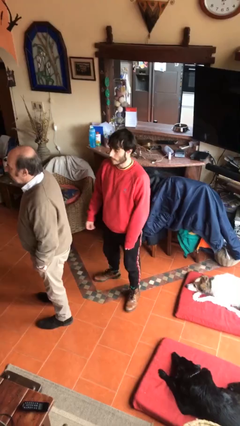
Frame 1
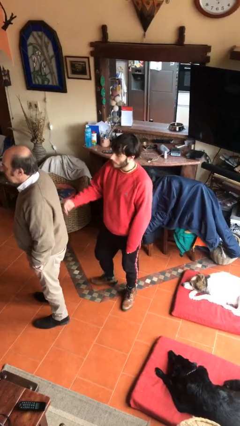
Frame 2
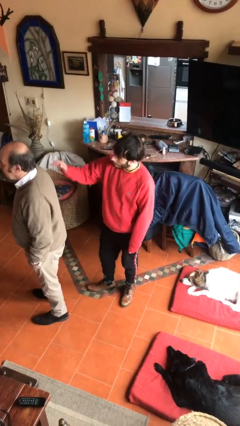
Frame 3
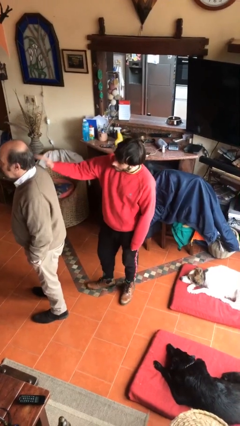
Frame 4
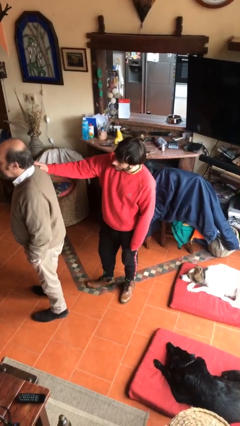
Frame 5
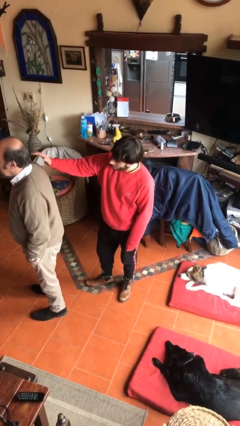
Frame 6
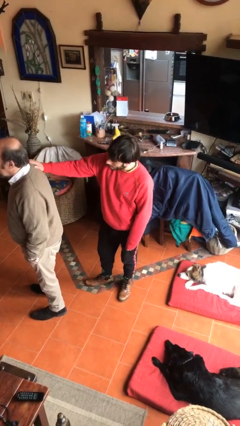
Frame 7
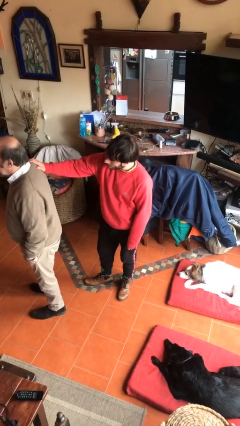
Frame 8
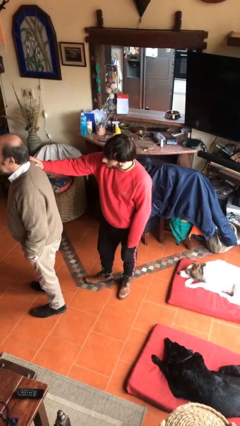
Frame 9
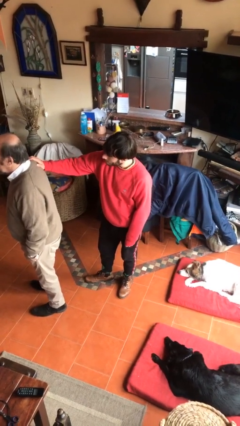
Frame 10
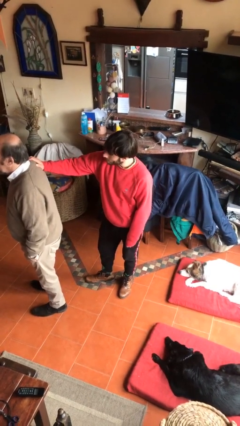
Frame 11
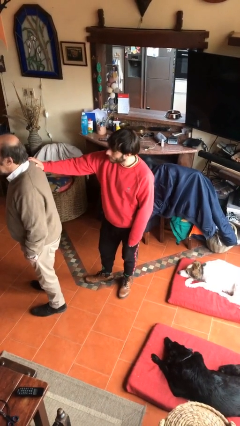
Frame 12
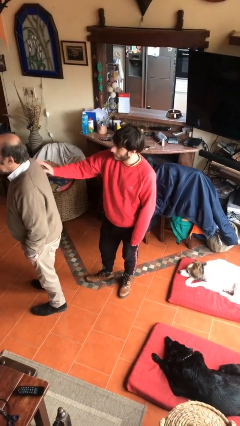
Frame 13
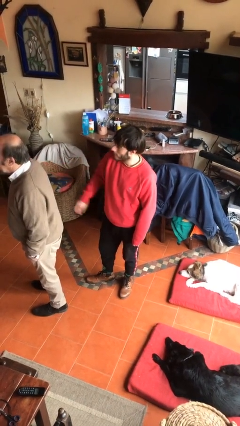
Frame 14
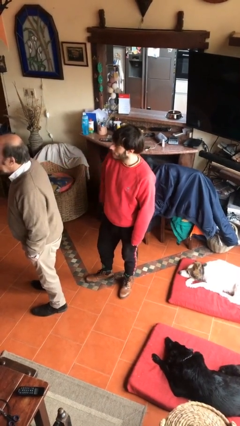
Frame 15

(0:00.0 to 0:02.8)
person touches back of person

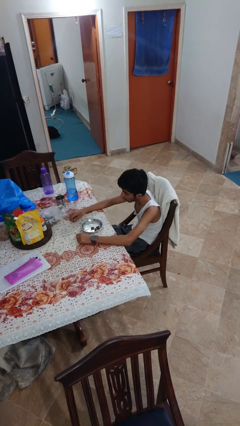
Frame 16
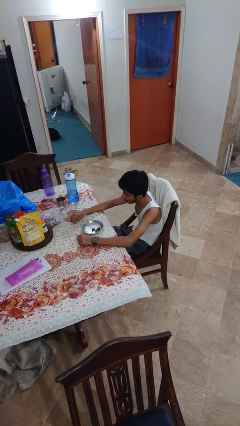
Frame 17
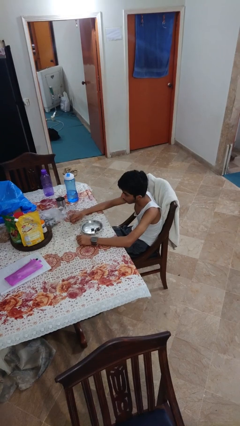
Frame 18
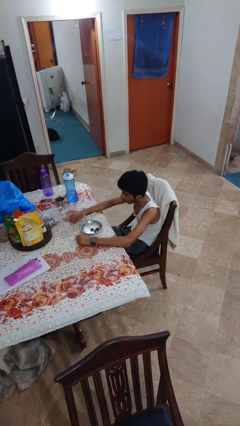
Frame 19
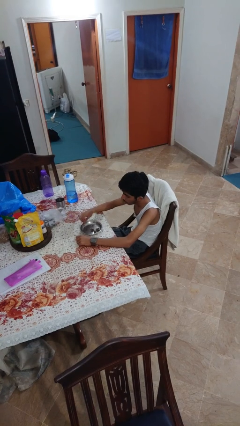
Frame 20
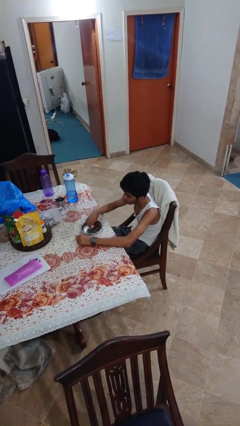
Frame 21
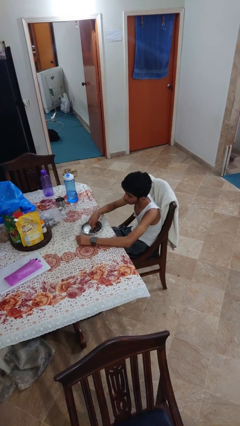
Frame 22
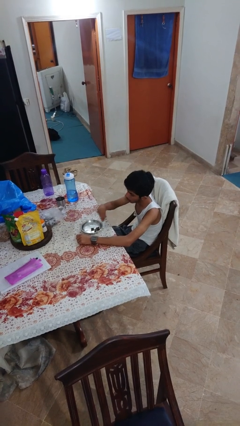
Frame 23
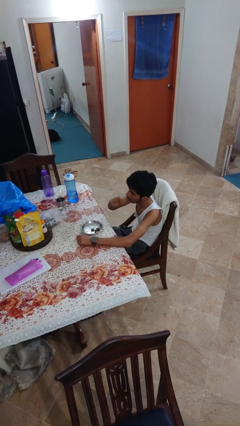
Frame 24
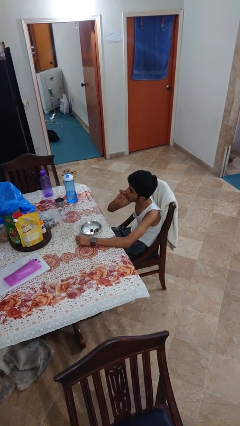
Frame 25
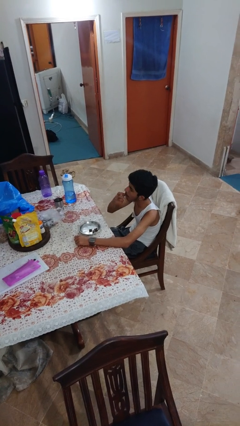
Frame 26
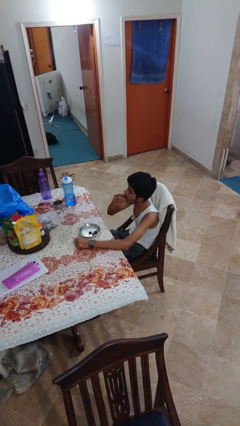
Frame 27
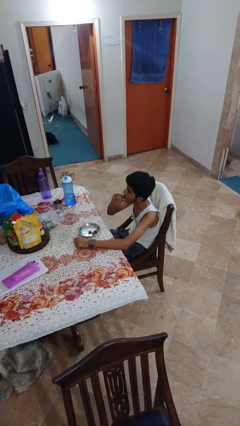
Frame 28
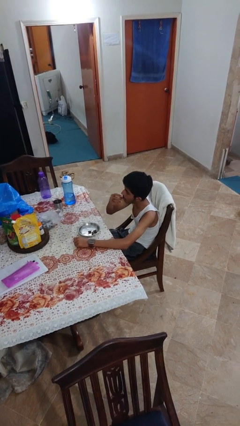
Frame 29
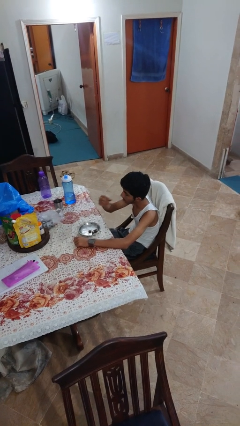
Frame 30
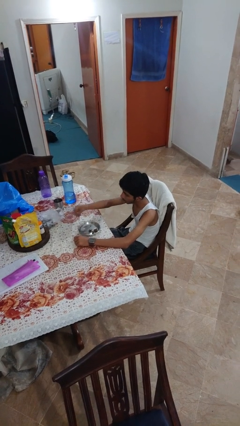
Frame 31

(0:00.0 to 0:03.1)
person eats with hands

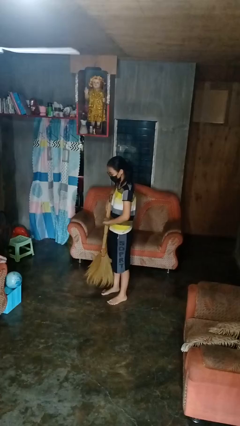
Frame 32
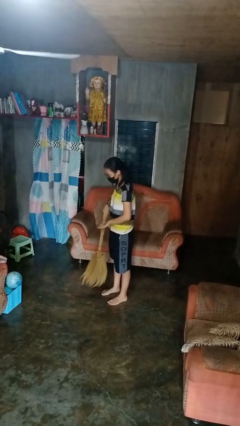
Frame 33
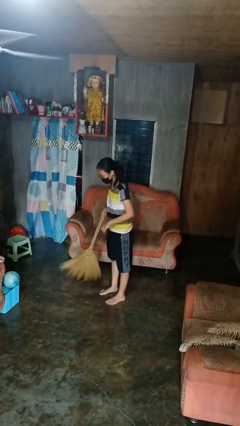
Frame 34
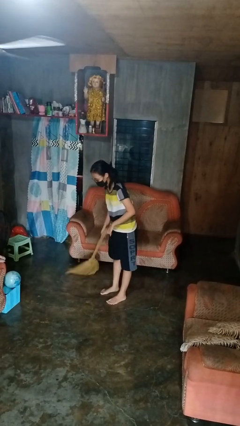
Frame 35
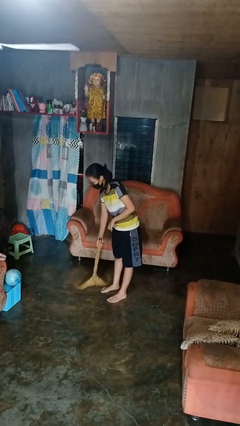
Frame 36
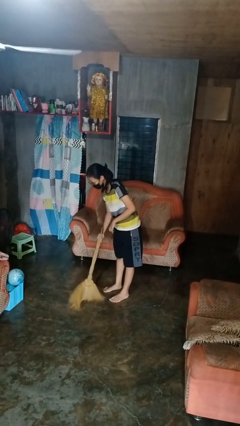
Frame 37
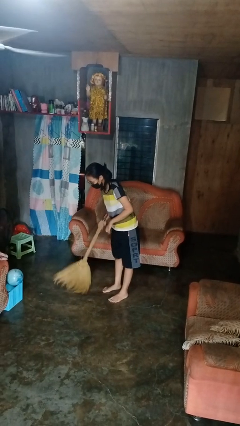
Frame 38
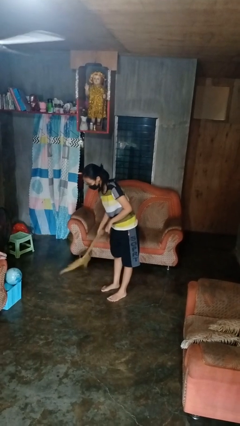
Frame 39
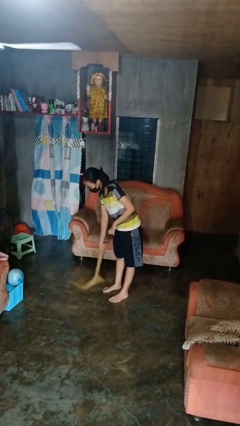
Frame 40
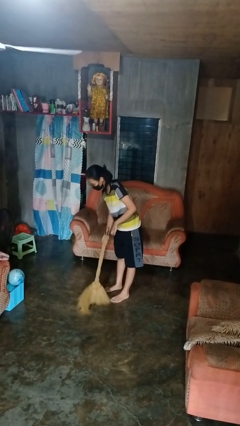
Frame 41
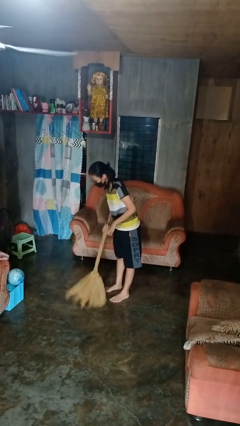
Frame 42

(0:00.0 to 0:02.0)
person sweeps floor

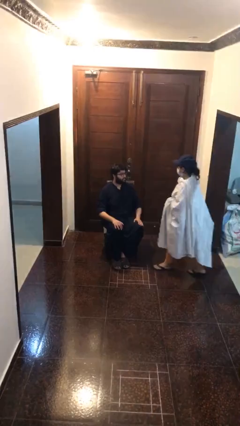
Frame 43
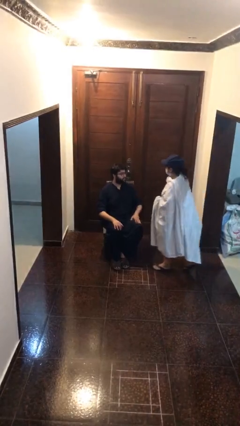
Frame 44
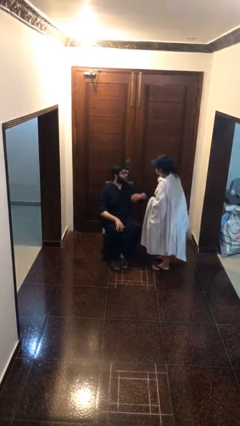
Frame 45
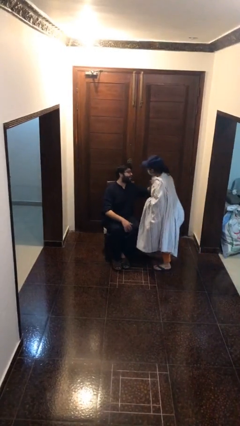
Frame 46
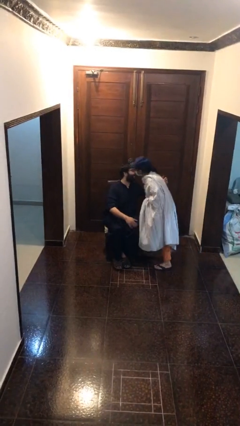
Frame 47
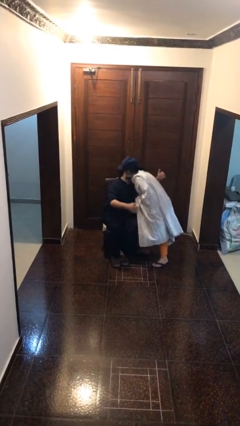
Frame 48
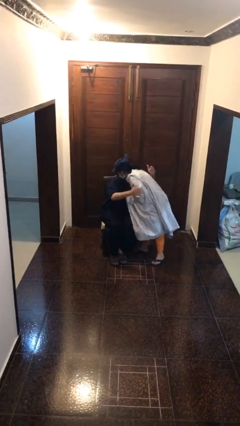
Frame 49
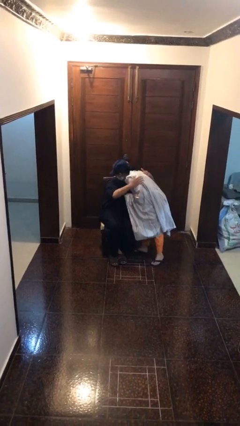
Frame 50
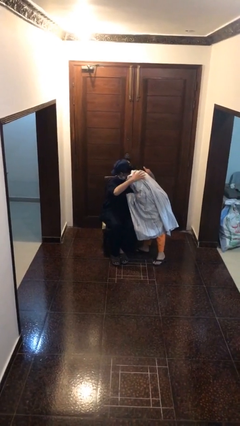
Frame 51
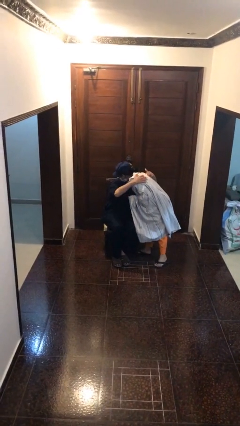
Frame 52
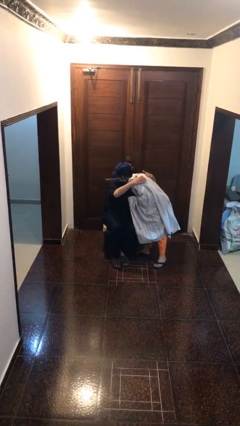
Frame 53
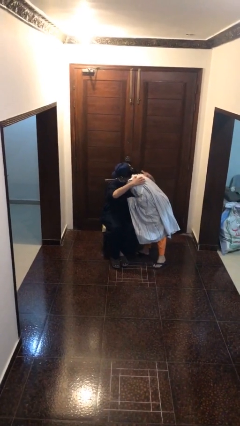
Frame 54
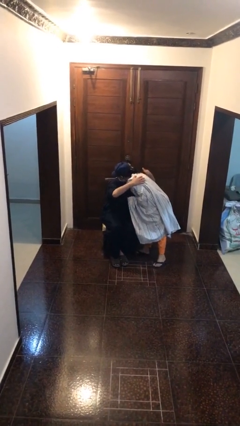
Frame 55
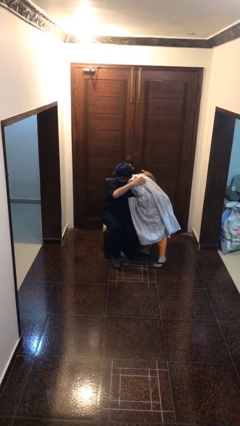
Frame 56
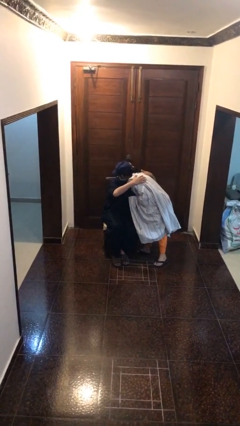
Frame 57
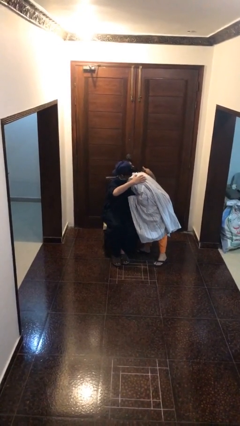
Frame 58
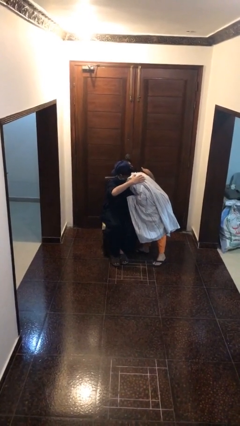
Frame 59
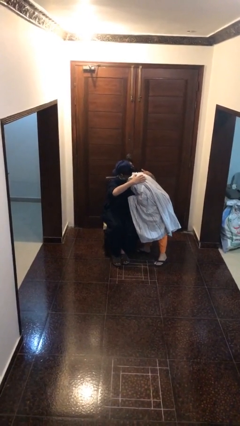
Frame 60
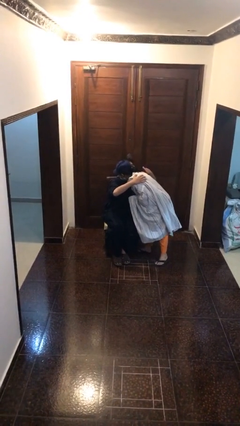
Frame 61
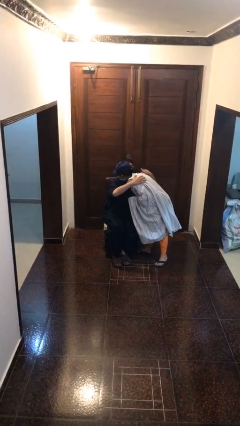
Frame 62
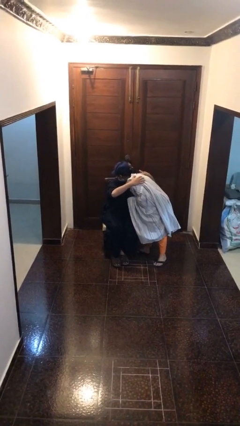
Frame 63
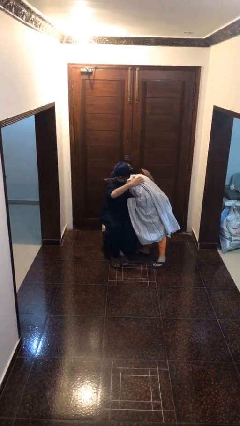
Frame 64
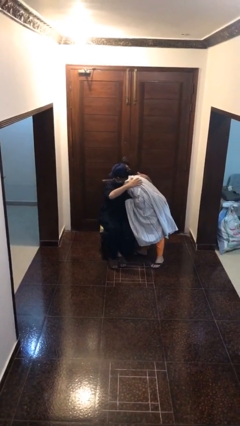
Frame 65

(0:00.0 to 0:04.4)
person embraces person

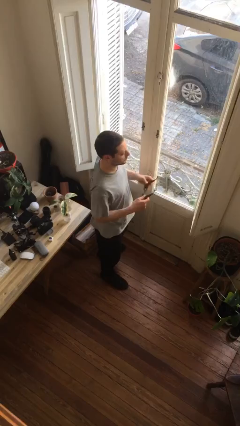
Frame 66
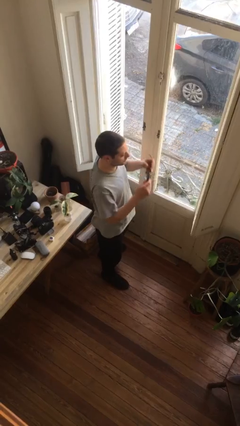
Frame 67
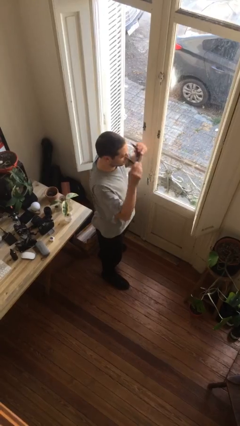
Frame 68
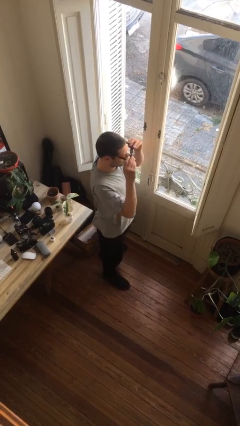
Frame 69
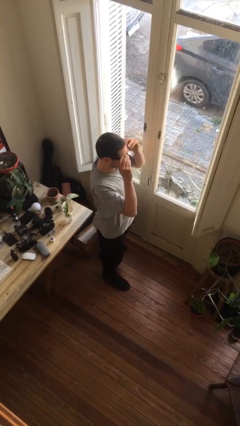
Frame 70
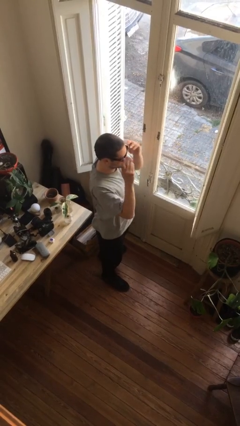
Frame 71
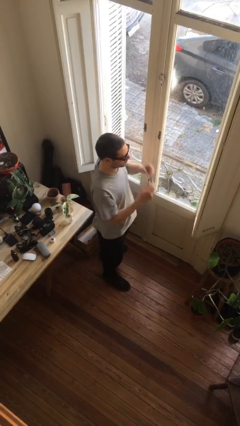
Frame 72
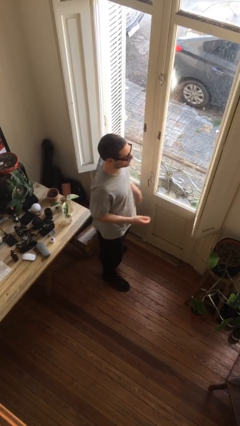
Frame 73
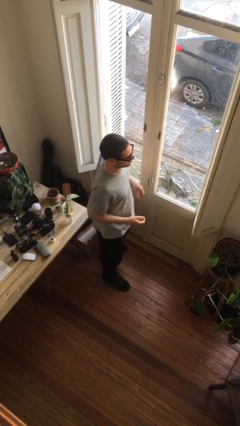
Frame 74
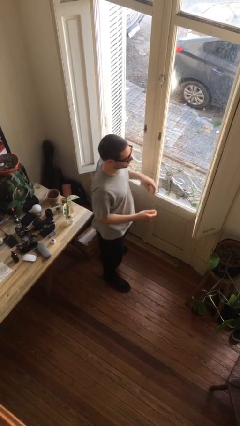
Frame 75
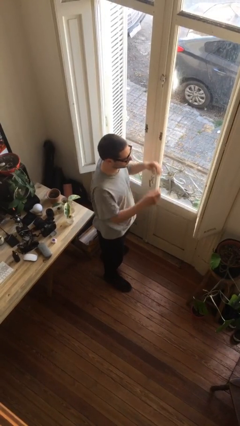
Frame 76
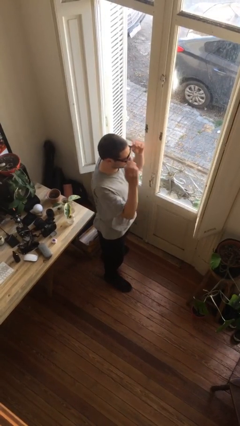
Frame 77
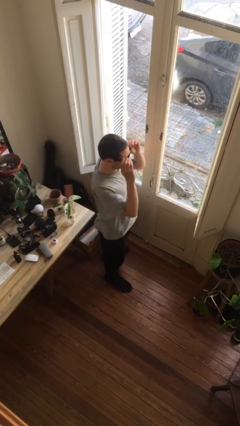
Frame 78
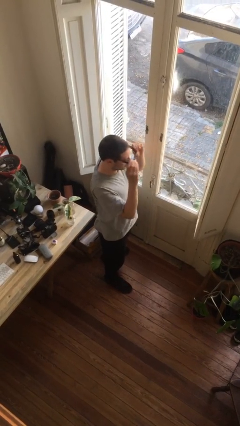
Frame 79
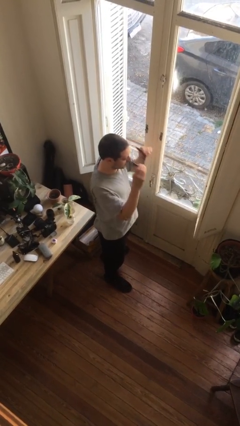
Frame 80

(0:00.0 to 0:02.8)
person puts on sunglasses

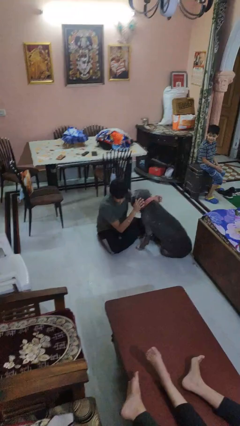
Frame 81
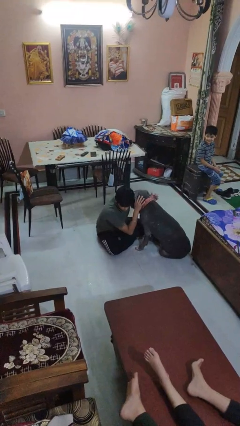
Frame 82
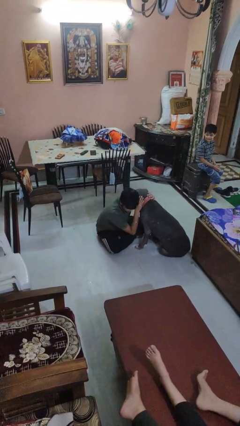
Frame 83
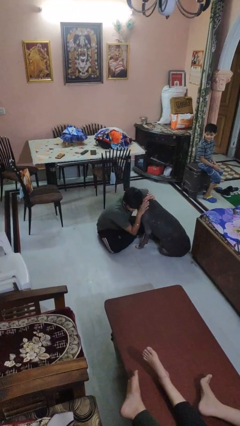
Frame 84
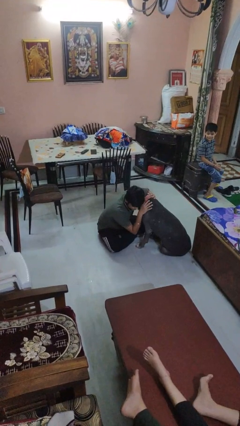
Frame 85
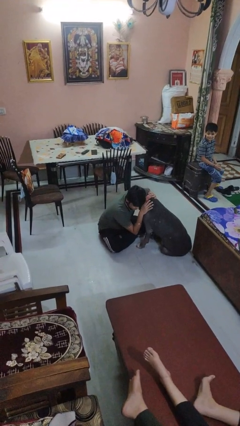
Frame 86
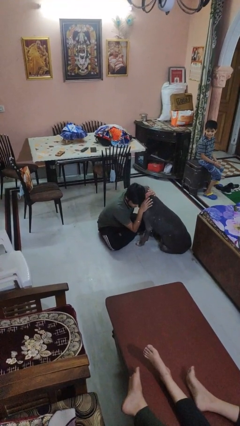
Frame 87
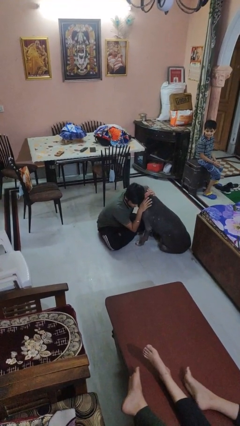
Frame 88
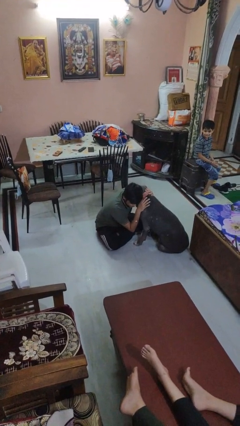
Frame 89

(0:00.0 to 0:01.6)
person hugs dog

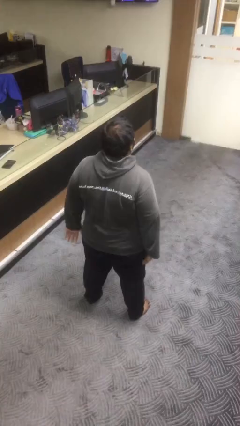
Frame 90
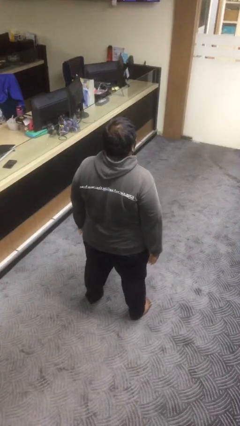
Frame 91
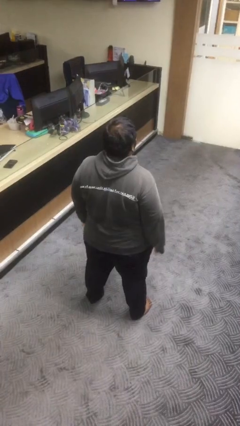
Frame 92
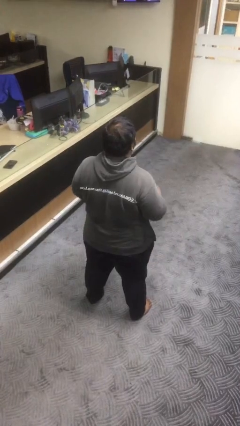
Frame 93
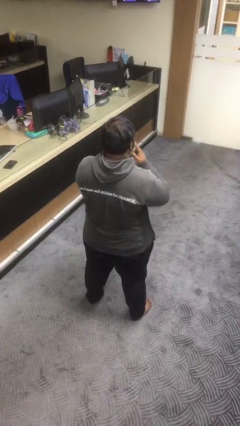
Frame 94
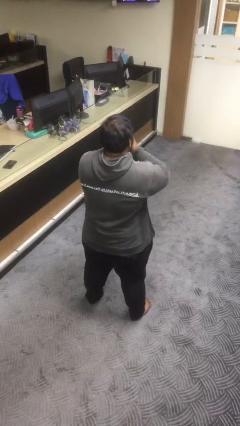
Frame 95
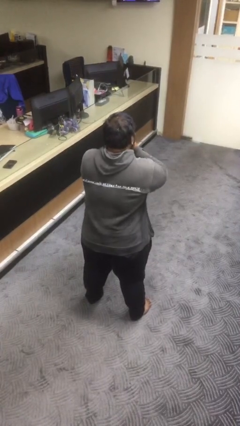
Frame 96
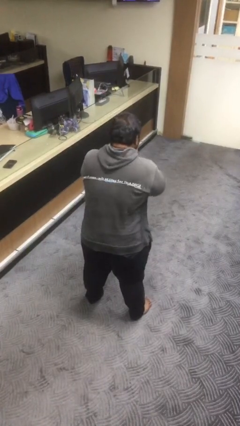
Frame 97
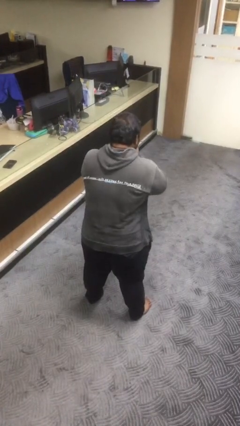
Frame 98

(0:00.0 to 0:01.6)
person sneezes into hand
